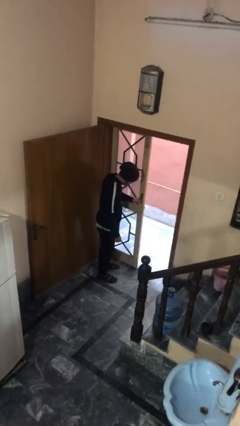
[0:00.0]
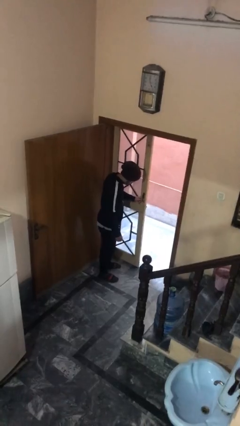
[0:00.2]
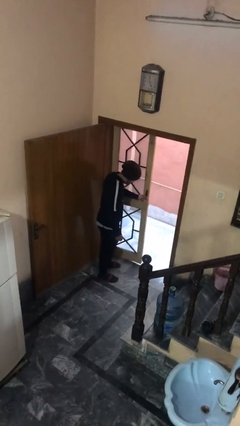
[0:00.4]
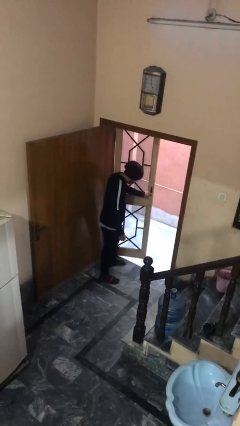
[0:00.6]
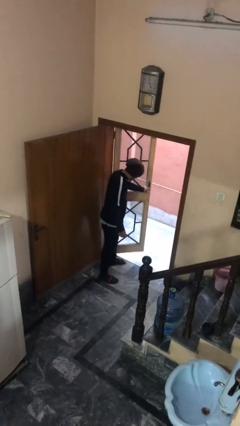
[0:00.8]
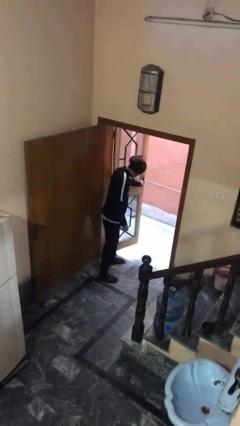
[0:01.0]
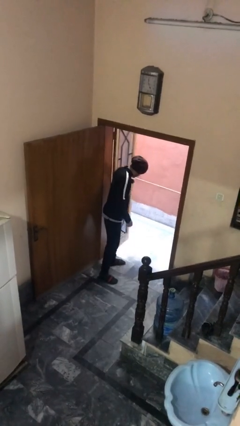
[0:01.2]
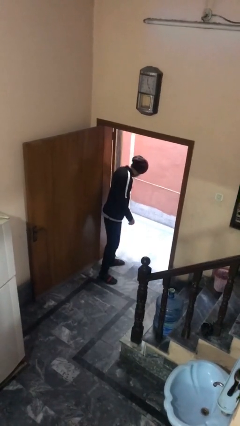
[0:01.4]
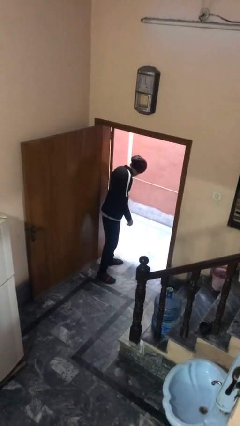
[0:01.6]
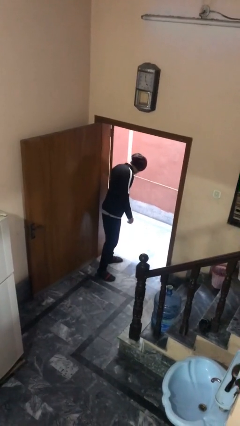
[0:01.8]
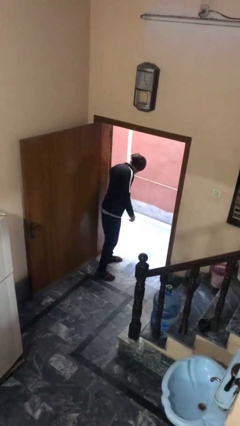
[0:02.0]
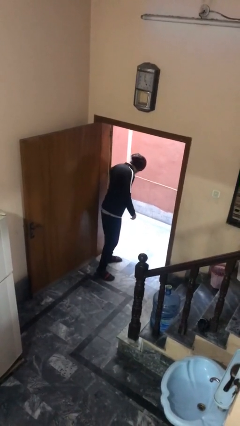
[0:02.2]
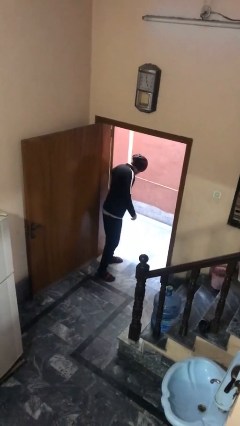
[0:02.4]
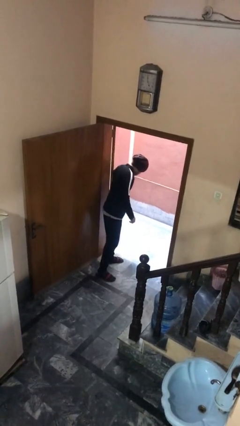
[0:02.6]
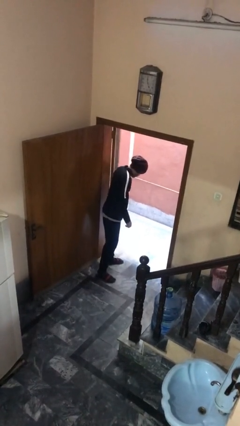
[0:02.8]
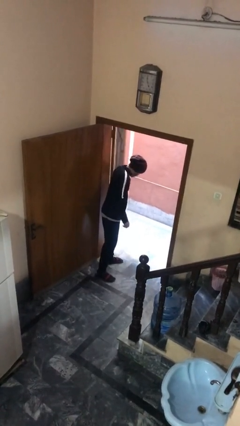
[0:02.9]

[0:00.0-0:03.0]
person opens facility door

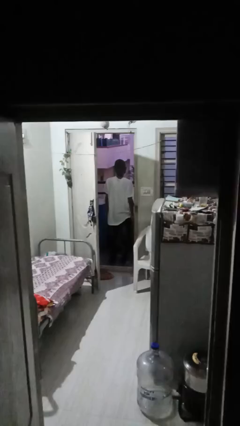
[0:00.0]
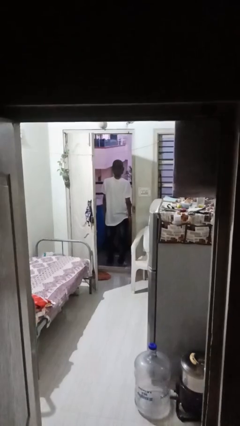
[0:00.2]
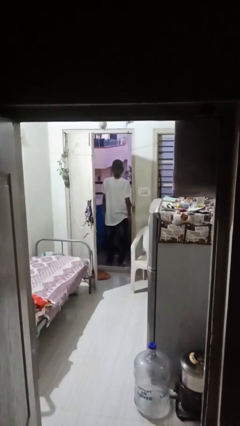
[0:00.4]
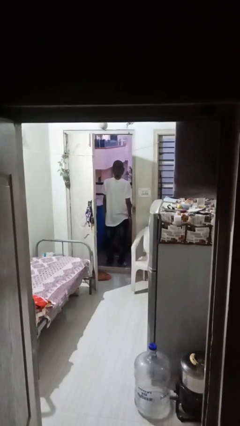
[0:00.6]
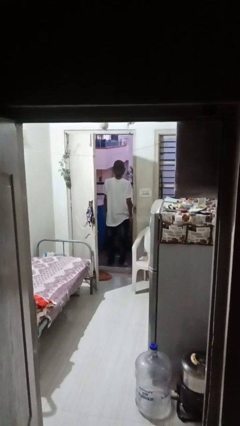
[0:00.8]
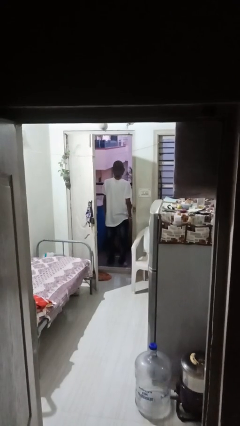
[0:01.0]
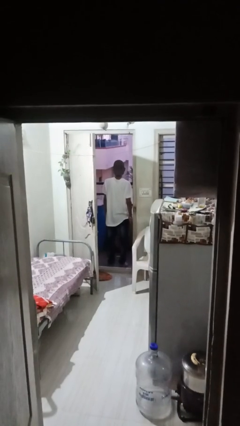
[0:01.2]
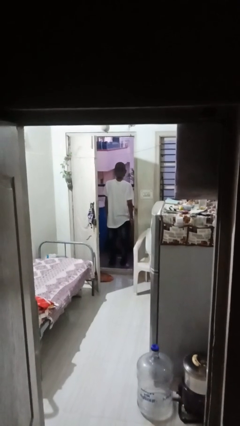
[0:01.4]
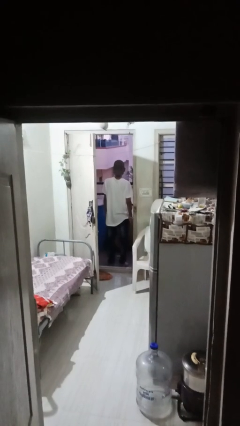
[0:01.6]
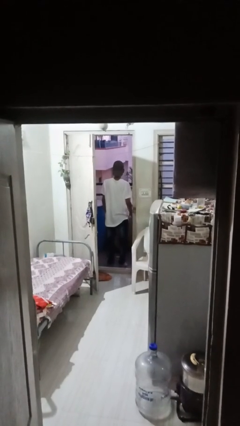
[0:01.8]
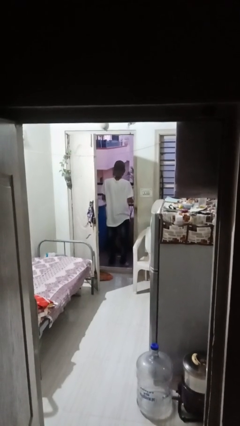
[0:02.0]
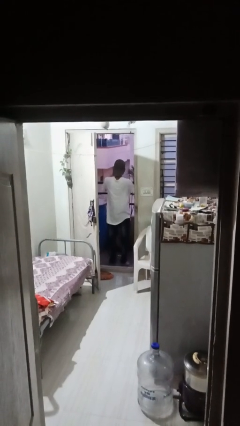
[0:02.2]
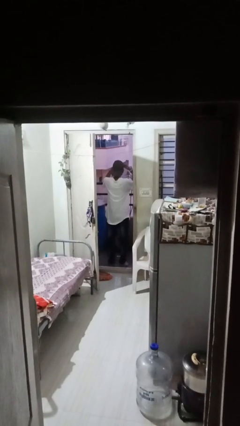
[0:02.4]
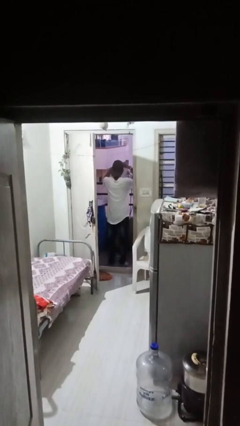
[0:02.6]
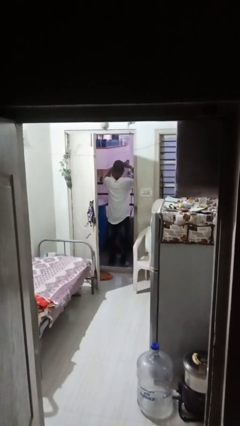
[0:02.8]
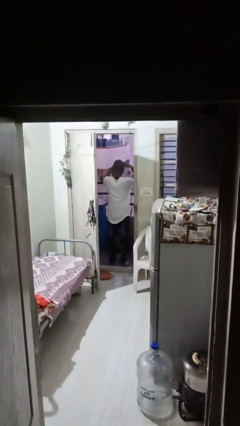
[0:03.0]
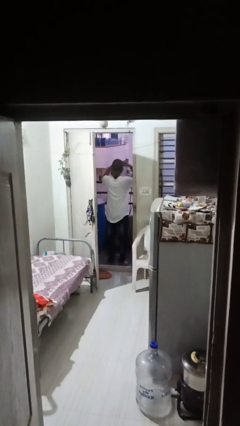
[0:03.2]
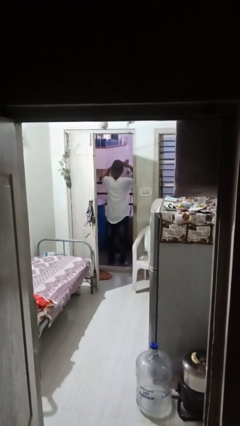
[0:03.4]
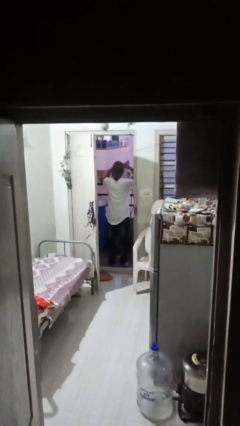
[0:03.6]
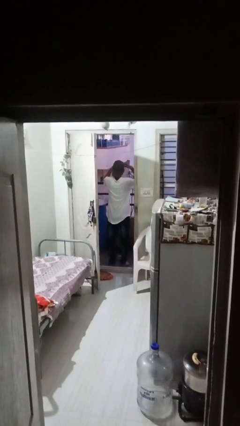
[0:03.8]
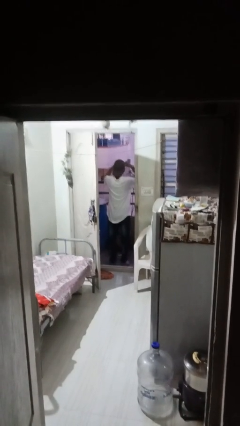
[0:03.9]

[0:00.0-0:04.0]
person shades eyes

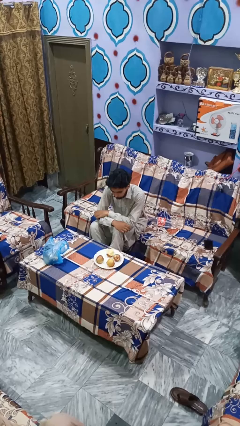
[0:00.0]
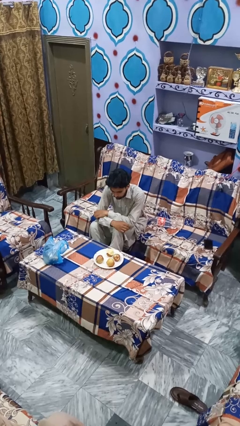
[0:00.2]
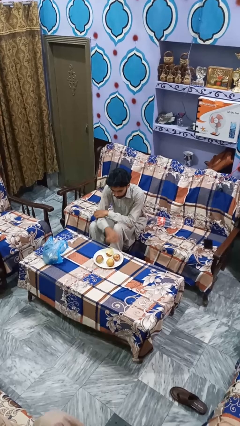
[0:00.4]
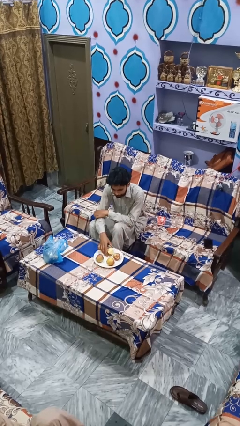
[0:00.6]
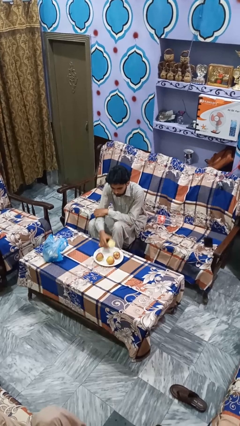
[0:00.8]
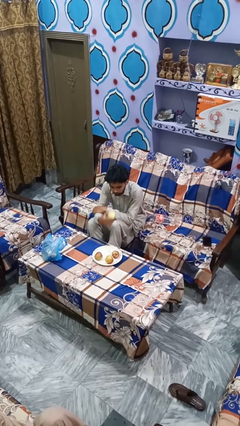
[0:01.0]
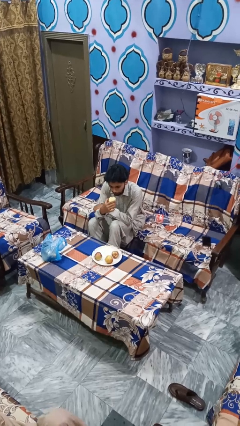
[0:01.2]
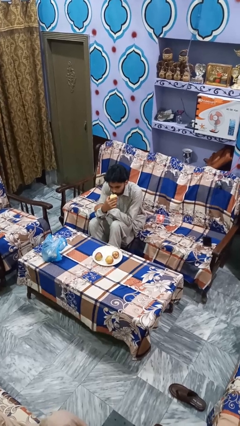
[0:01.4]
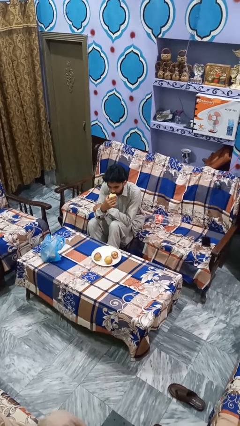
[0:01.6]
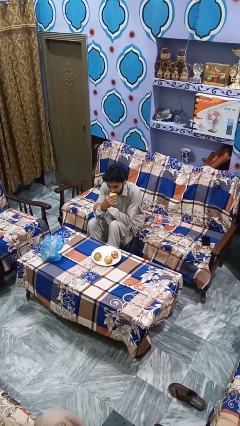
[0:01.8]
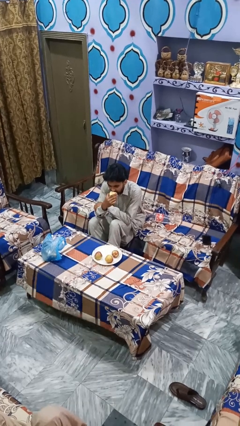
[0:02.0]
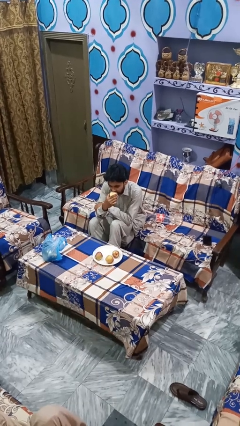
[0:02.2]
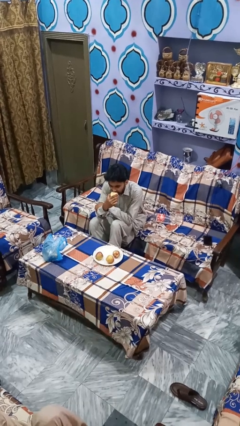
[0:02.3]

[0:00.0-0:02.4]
person eats apple

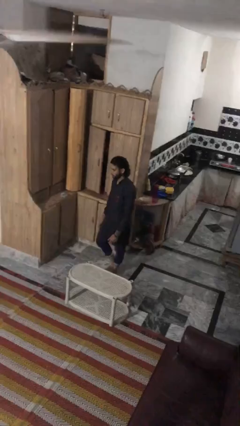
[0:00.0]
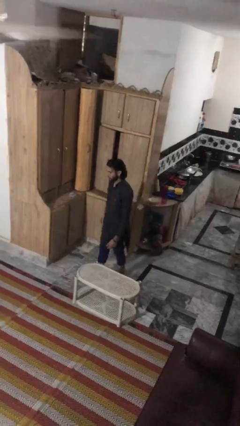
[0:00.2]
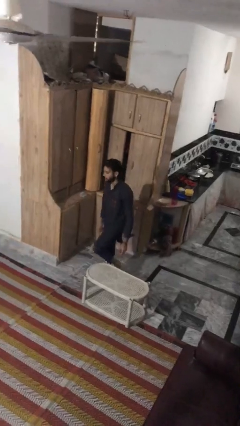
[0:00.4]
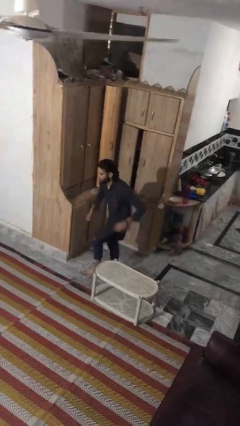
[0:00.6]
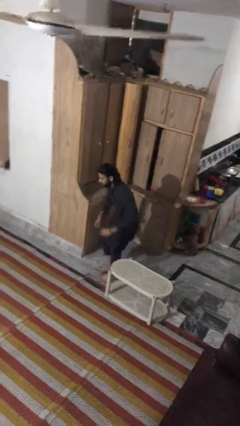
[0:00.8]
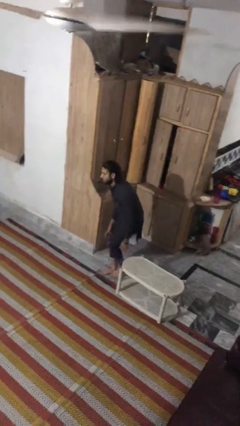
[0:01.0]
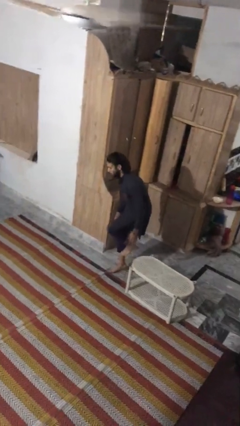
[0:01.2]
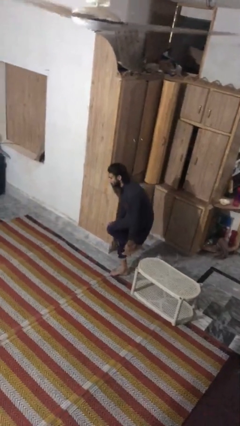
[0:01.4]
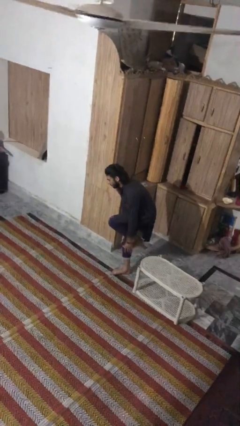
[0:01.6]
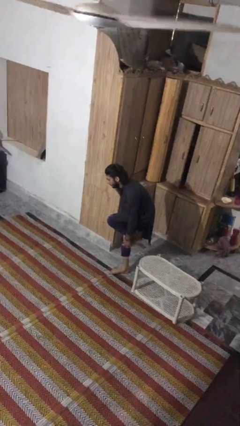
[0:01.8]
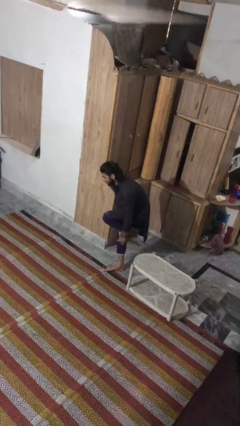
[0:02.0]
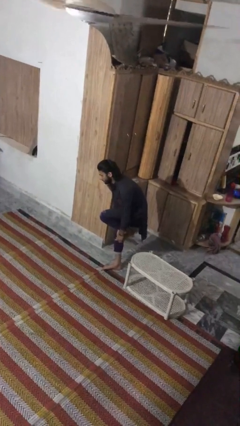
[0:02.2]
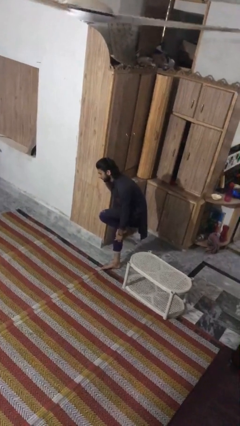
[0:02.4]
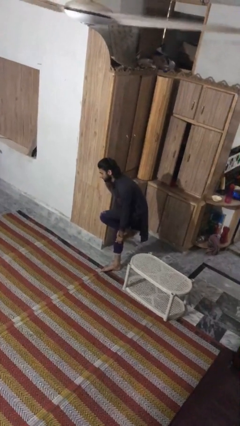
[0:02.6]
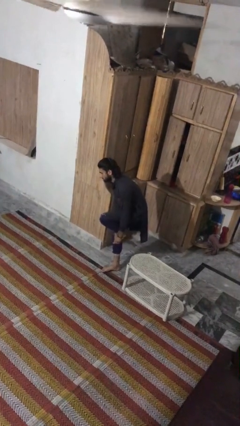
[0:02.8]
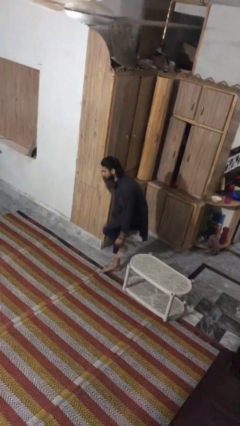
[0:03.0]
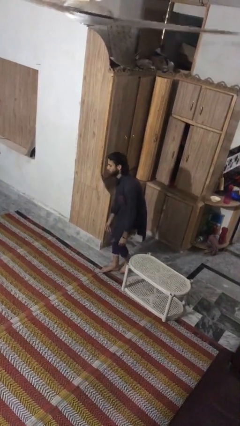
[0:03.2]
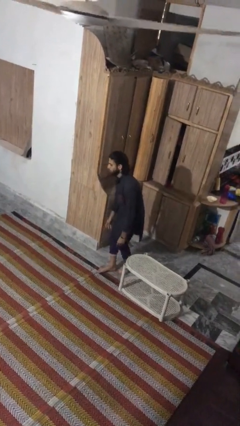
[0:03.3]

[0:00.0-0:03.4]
person bumps into table

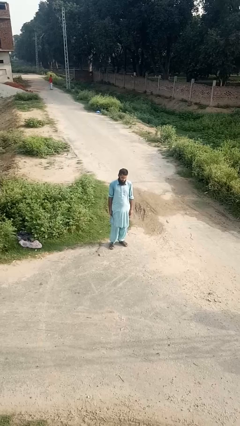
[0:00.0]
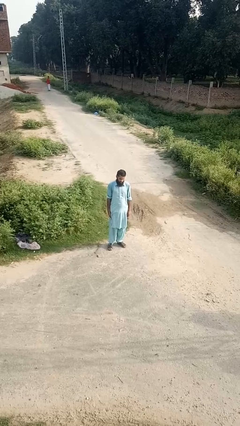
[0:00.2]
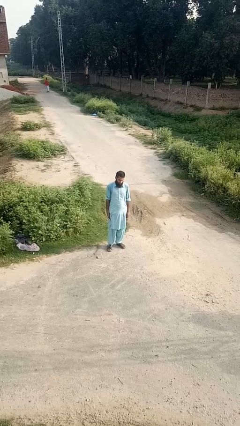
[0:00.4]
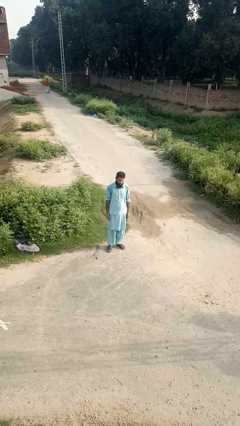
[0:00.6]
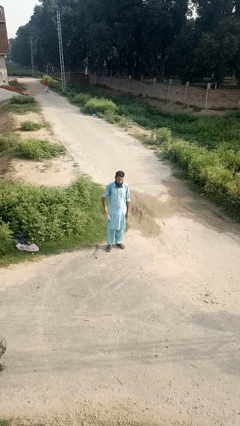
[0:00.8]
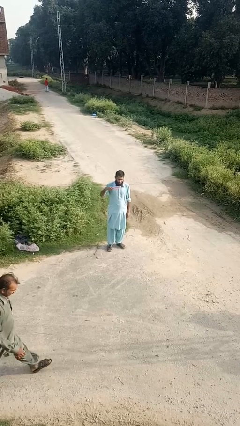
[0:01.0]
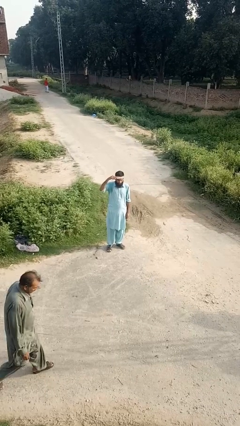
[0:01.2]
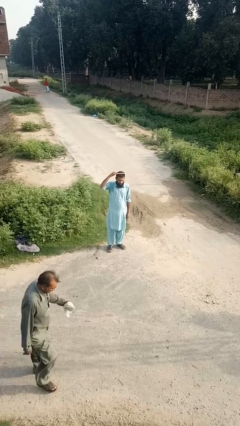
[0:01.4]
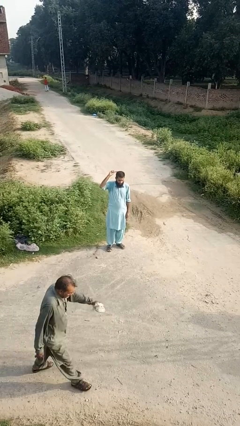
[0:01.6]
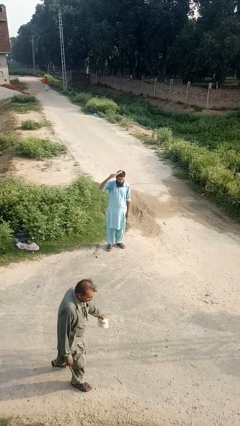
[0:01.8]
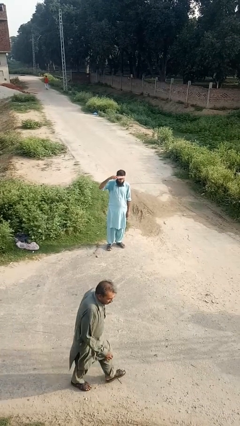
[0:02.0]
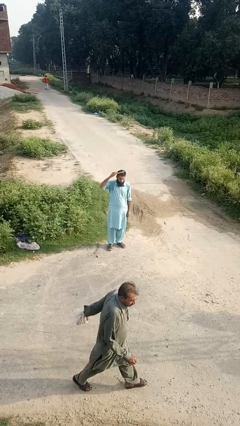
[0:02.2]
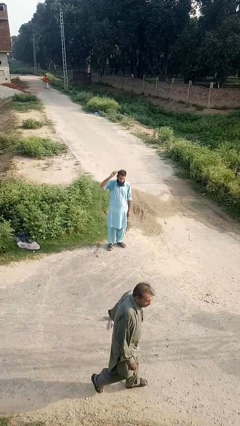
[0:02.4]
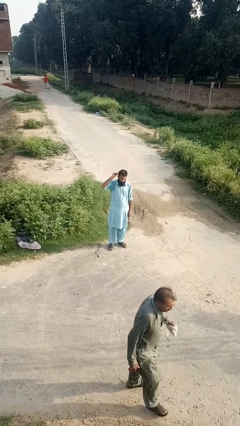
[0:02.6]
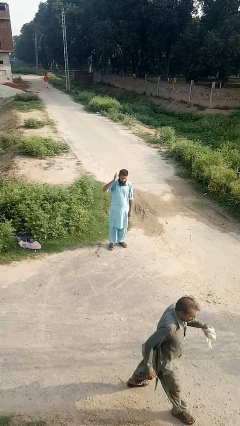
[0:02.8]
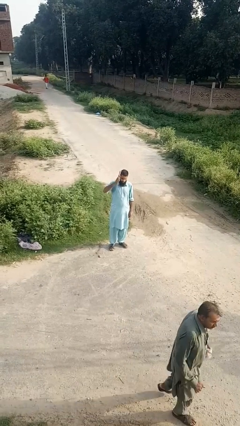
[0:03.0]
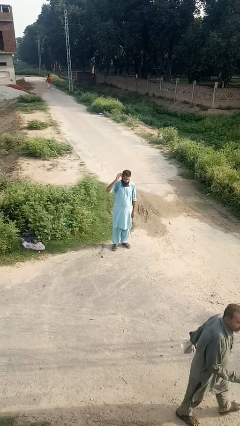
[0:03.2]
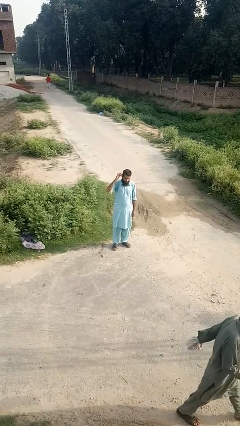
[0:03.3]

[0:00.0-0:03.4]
person brushes hair

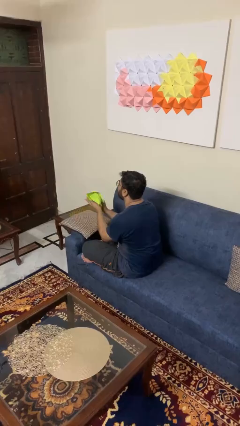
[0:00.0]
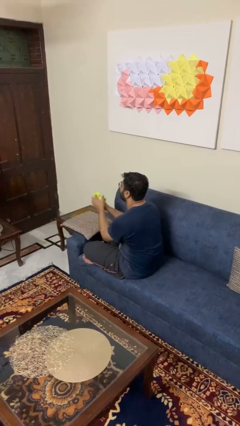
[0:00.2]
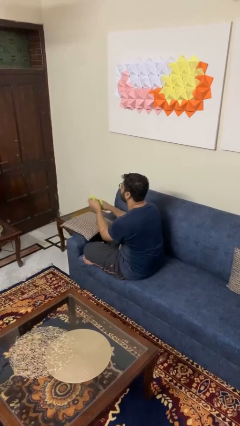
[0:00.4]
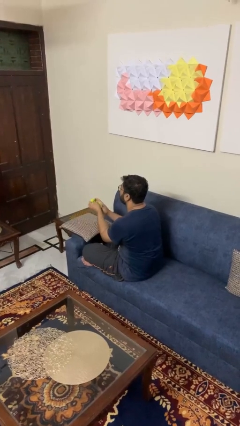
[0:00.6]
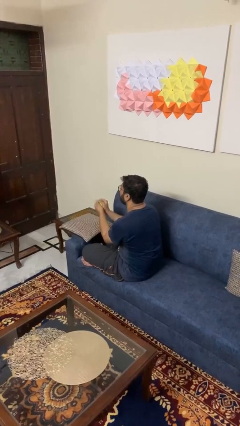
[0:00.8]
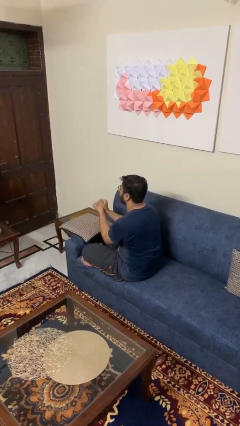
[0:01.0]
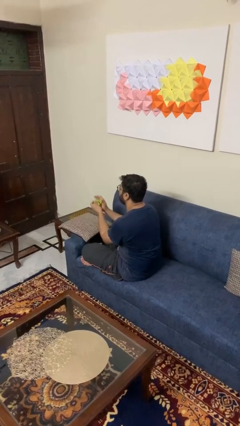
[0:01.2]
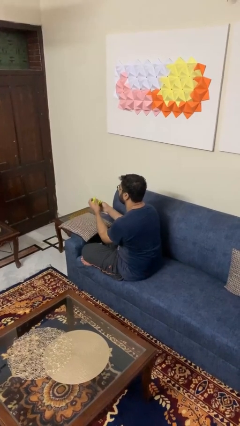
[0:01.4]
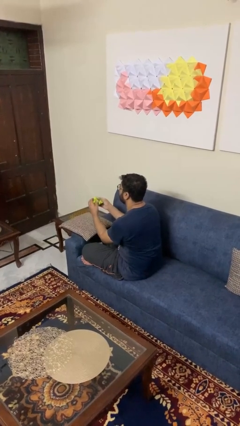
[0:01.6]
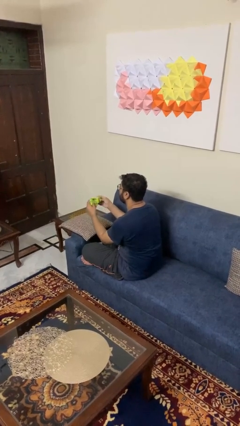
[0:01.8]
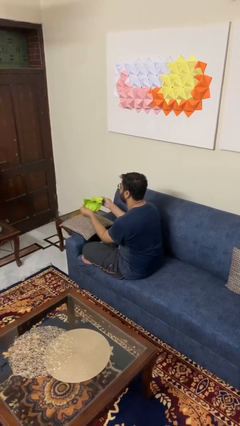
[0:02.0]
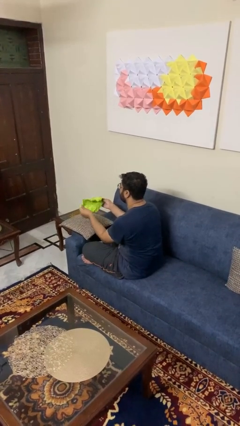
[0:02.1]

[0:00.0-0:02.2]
person crumples paper
